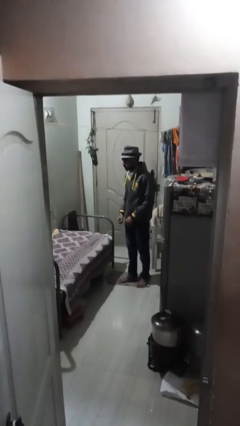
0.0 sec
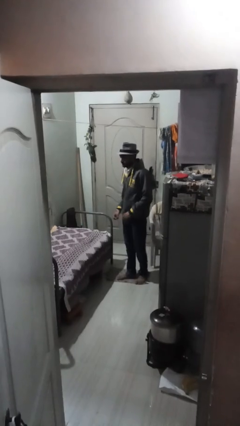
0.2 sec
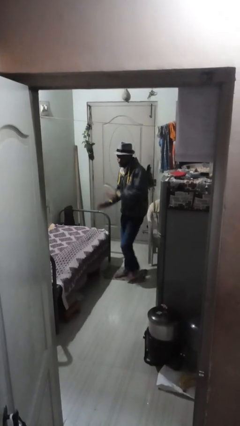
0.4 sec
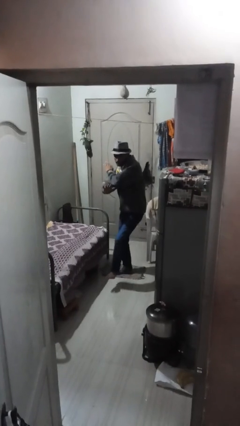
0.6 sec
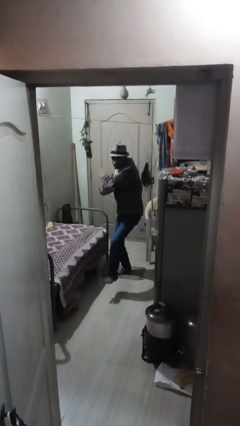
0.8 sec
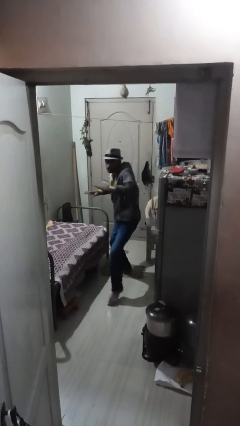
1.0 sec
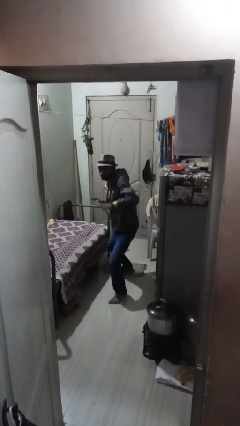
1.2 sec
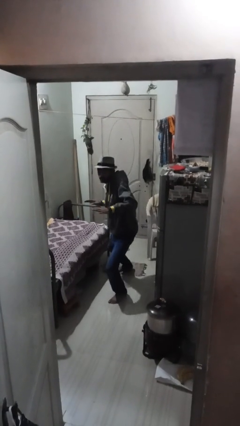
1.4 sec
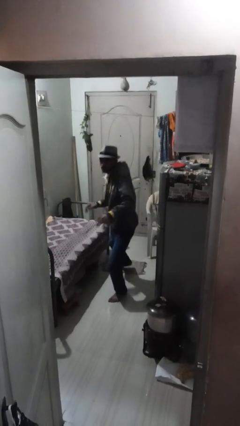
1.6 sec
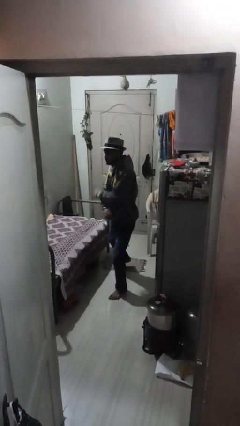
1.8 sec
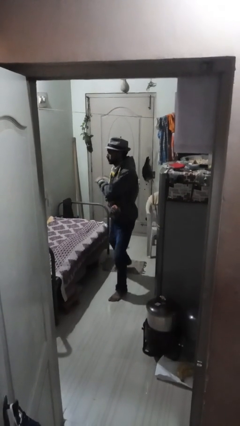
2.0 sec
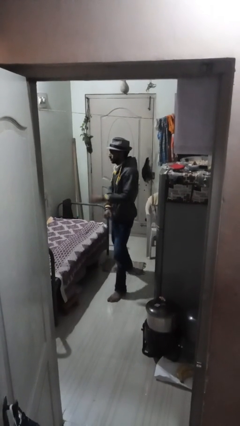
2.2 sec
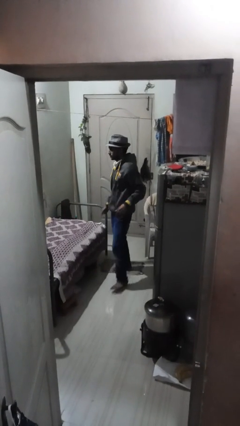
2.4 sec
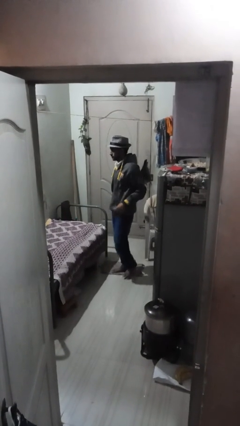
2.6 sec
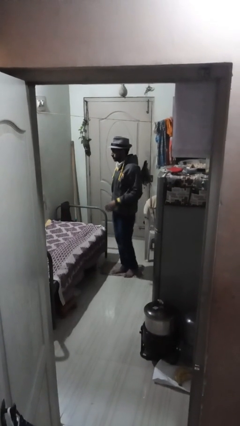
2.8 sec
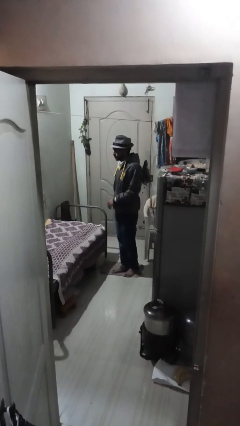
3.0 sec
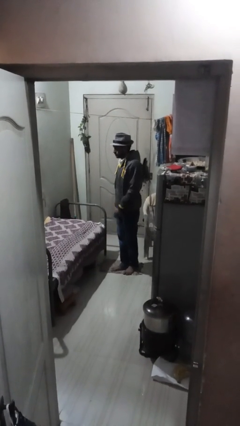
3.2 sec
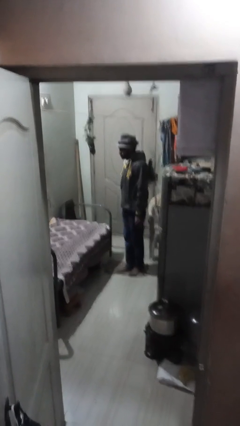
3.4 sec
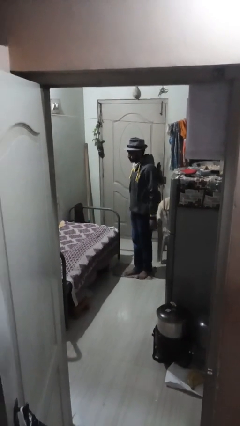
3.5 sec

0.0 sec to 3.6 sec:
person karate chop

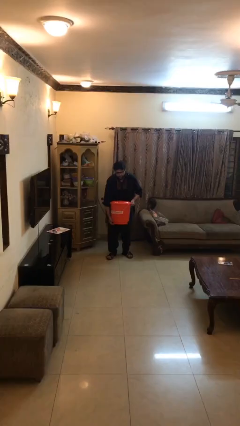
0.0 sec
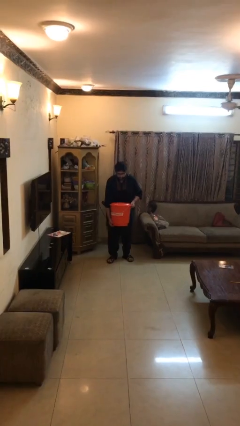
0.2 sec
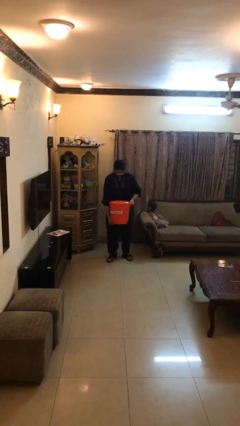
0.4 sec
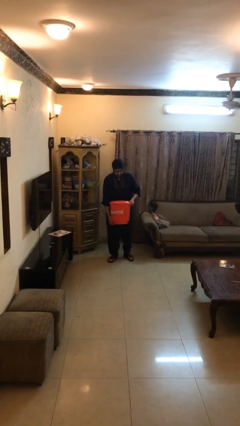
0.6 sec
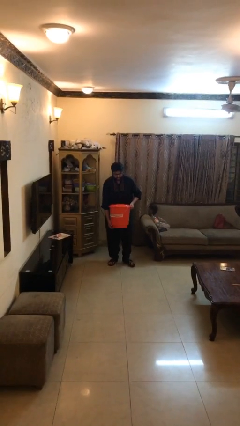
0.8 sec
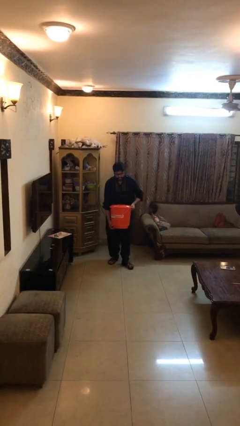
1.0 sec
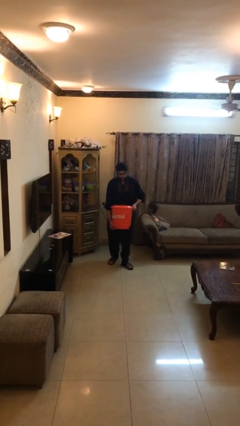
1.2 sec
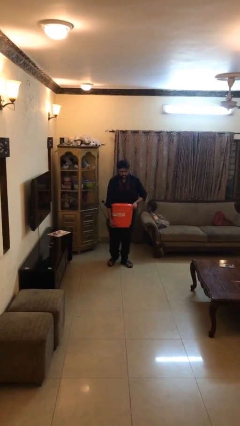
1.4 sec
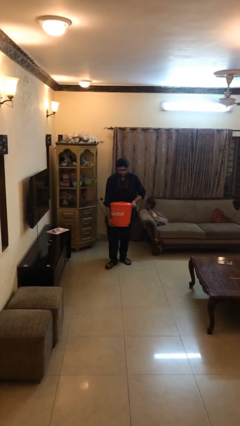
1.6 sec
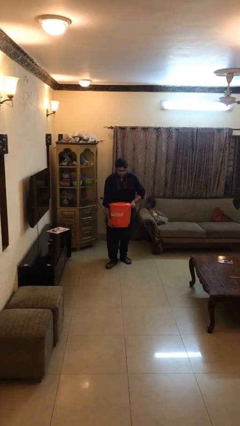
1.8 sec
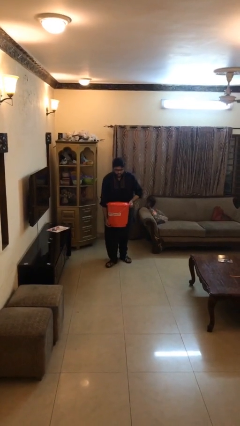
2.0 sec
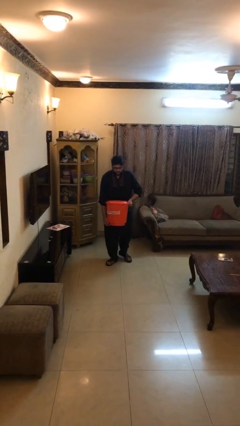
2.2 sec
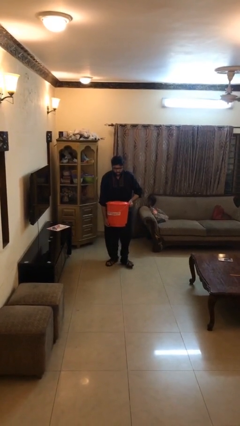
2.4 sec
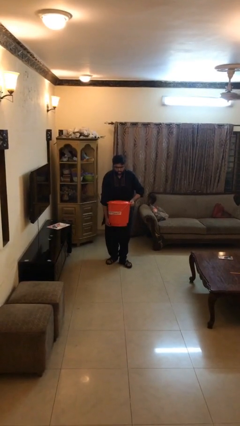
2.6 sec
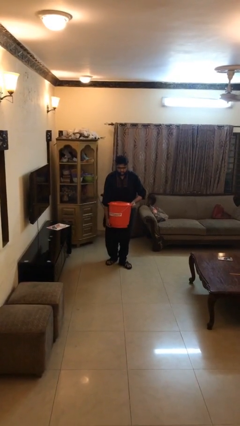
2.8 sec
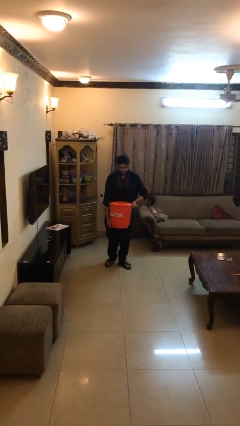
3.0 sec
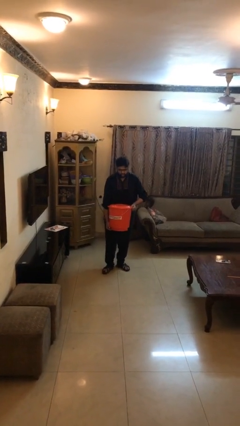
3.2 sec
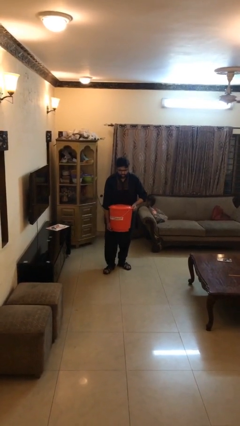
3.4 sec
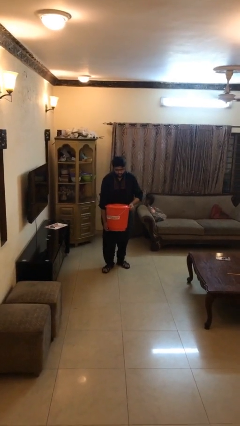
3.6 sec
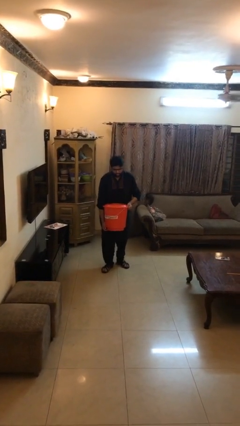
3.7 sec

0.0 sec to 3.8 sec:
person carries heavy object

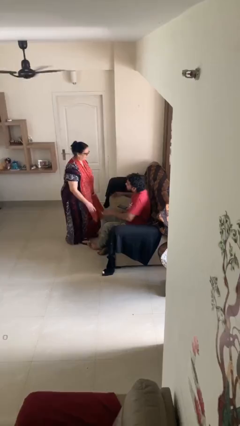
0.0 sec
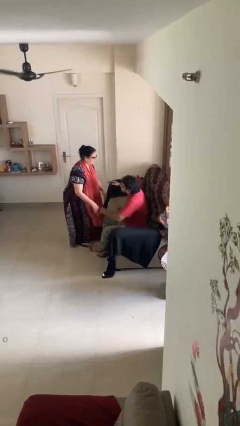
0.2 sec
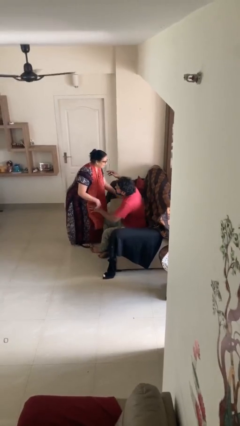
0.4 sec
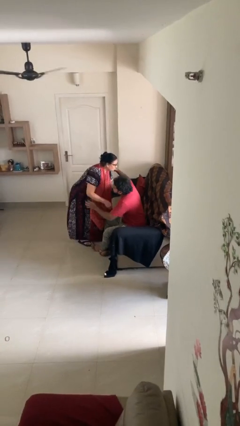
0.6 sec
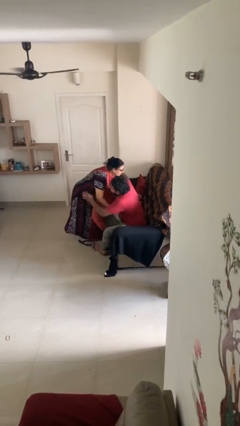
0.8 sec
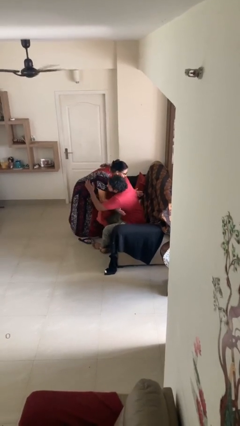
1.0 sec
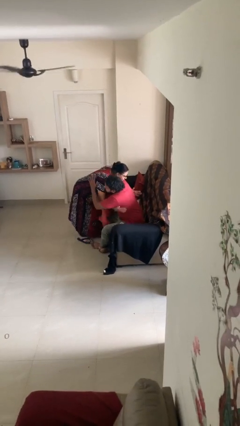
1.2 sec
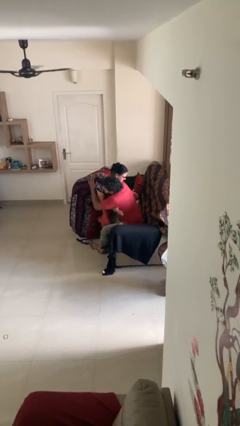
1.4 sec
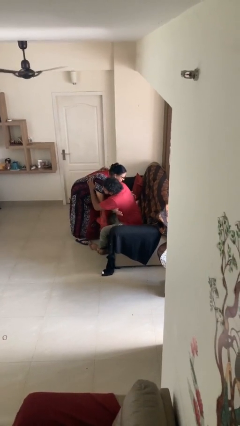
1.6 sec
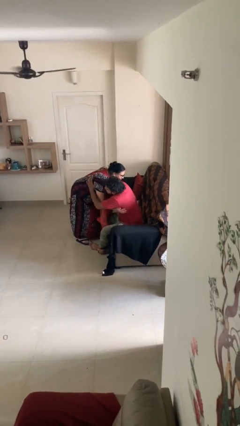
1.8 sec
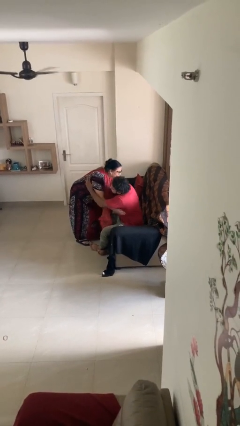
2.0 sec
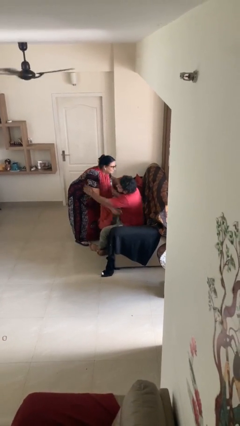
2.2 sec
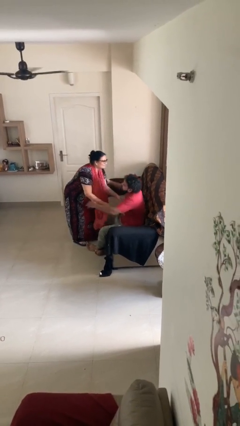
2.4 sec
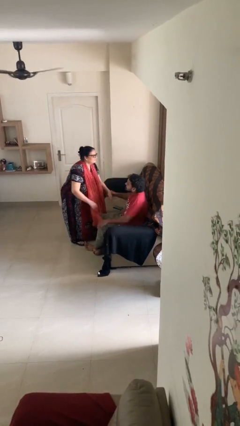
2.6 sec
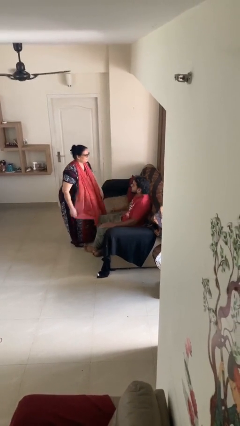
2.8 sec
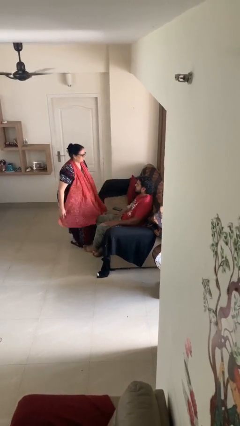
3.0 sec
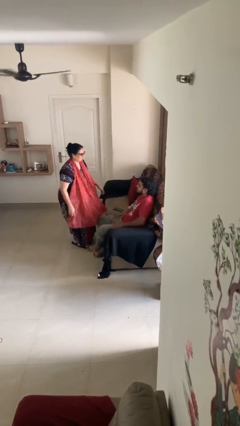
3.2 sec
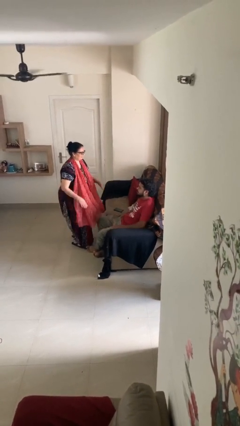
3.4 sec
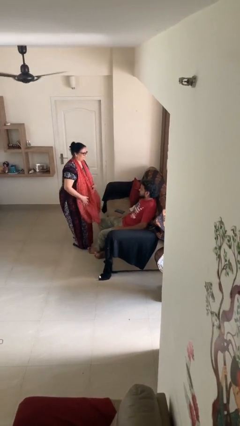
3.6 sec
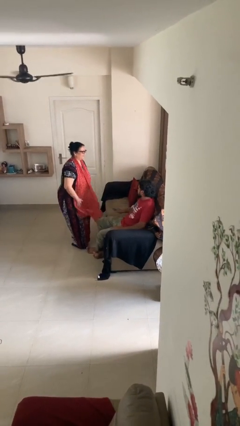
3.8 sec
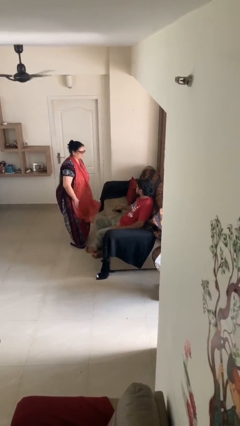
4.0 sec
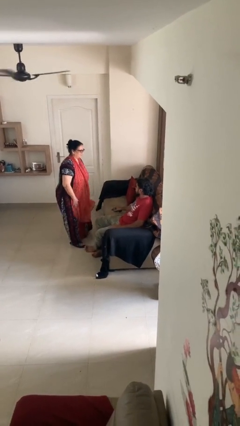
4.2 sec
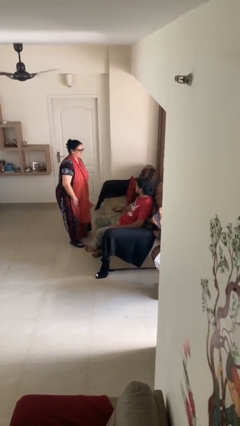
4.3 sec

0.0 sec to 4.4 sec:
person embraces person

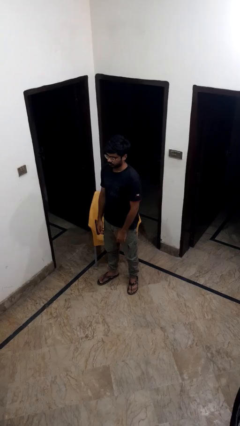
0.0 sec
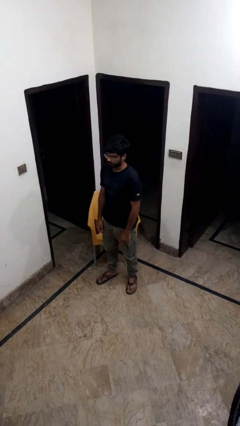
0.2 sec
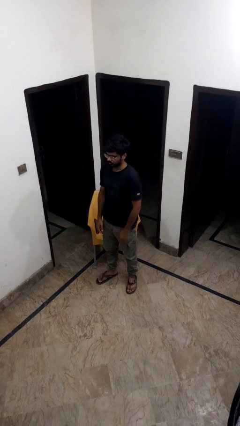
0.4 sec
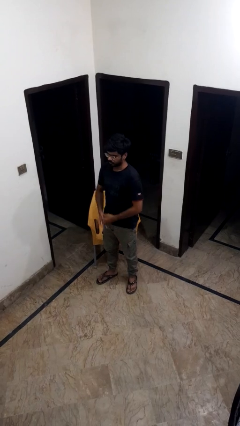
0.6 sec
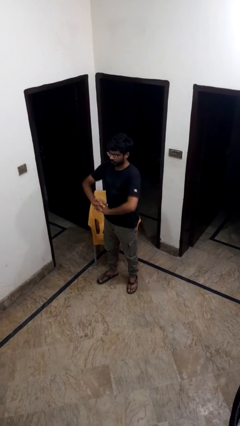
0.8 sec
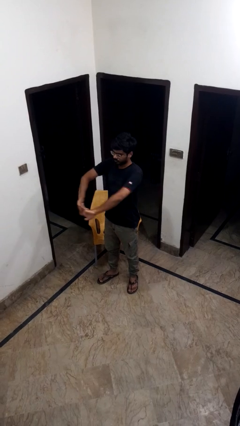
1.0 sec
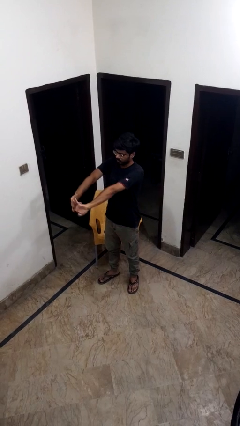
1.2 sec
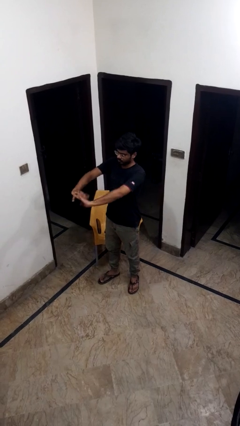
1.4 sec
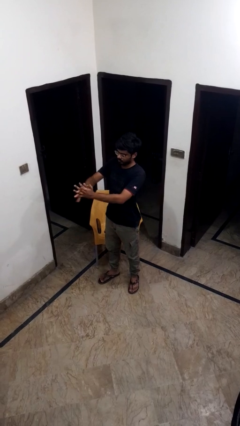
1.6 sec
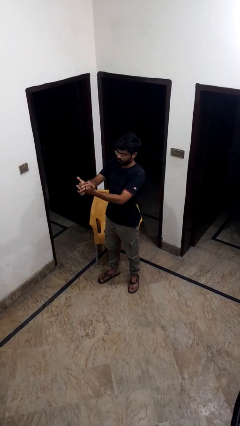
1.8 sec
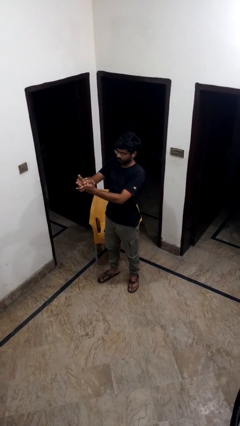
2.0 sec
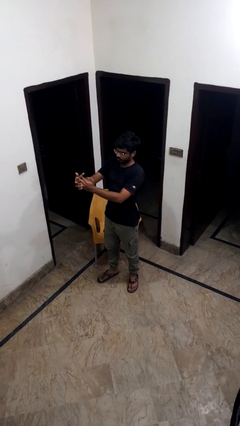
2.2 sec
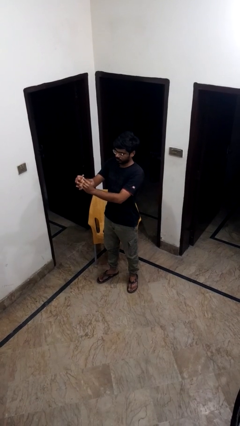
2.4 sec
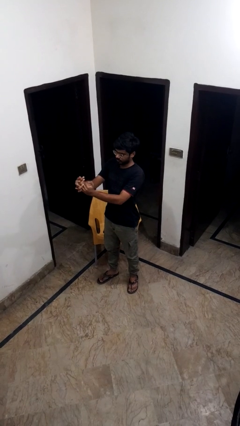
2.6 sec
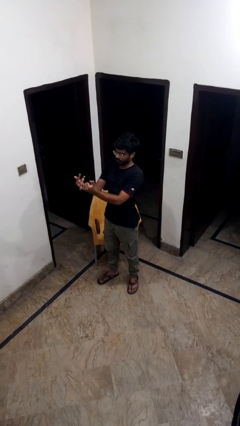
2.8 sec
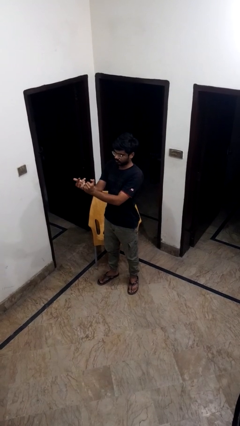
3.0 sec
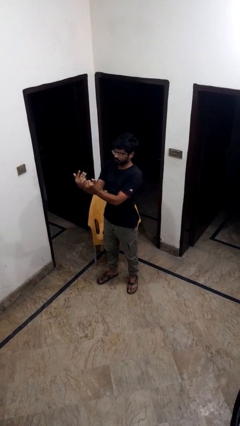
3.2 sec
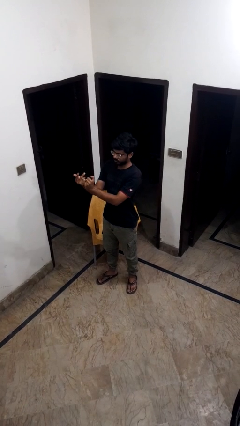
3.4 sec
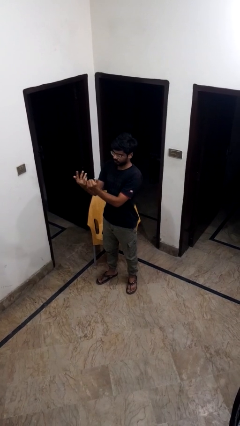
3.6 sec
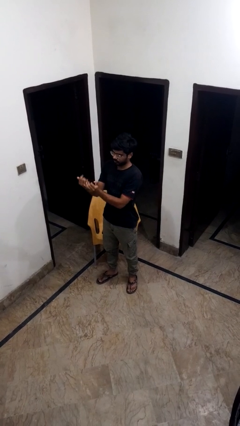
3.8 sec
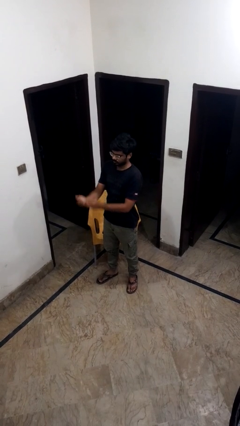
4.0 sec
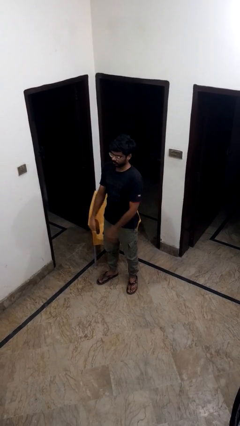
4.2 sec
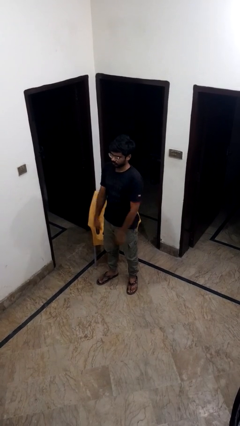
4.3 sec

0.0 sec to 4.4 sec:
person cracks knuckles

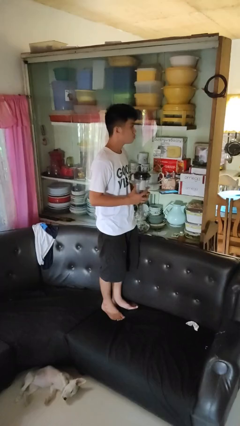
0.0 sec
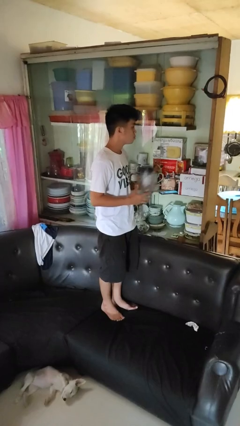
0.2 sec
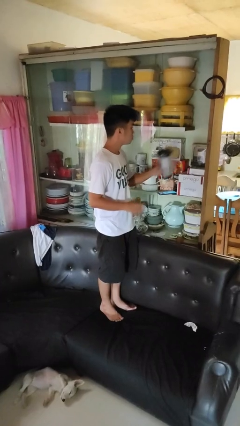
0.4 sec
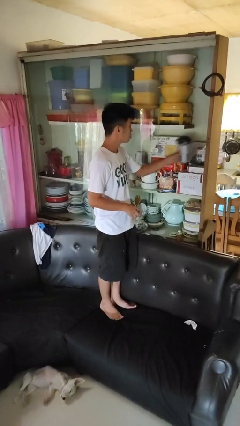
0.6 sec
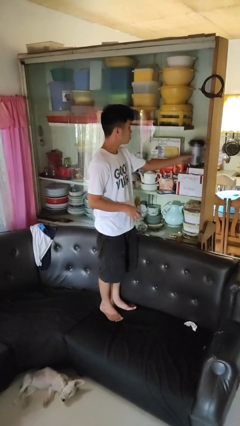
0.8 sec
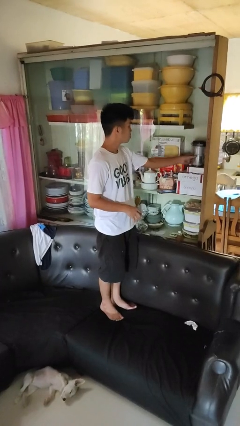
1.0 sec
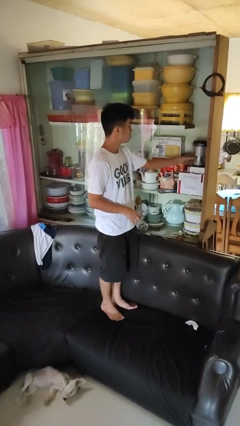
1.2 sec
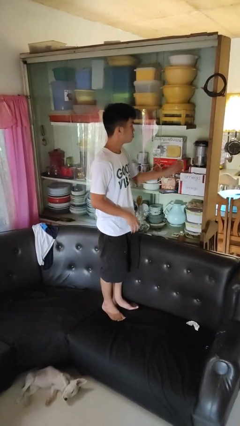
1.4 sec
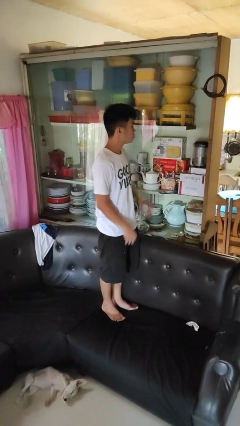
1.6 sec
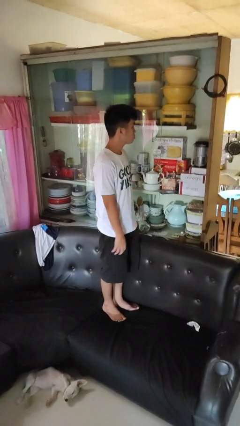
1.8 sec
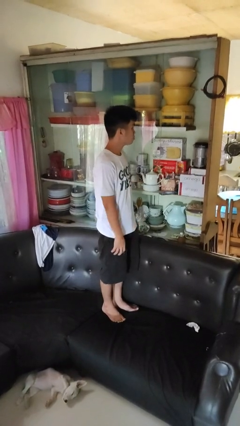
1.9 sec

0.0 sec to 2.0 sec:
person puts down object into cabinet
